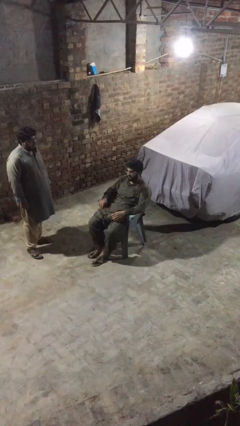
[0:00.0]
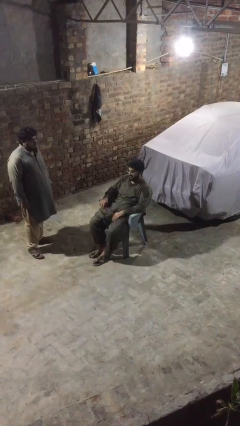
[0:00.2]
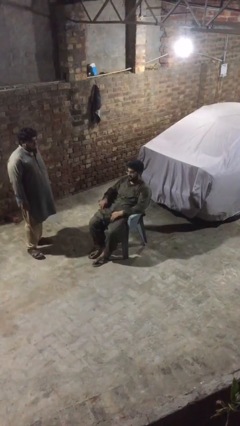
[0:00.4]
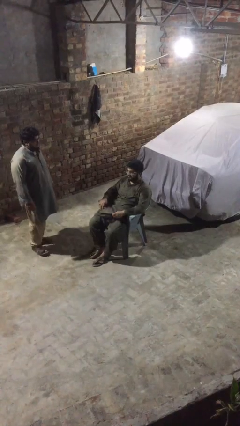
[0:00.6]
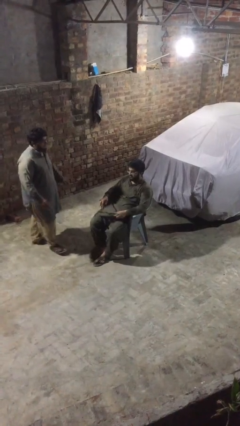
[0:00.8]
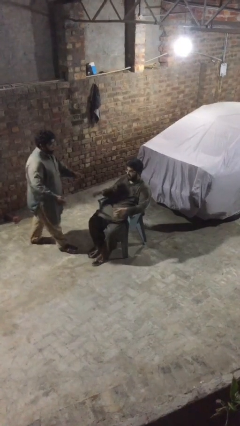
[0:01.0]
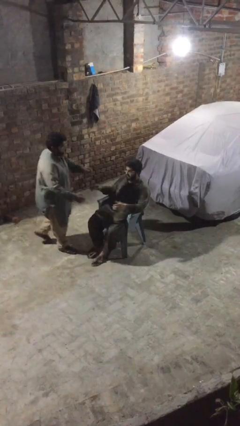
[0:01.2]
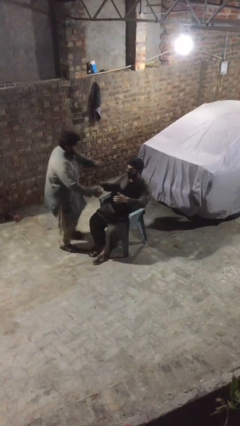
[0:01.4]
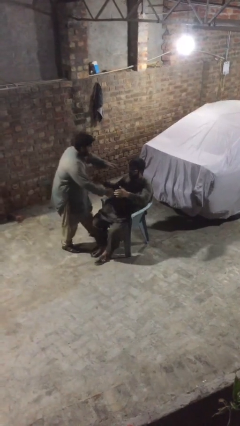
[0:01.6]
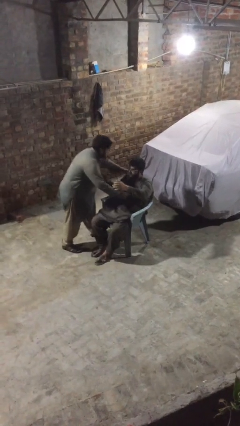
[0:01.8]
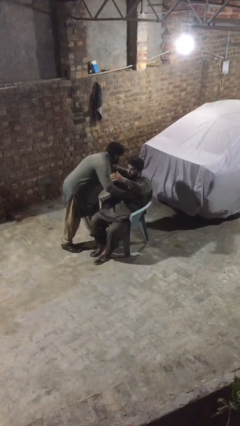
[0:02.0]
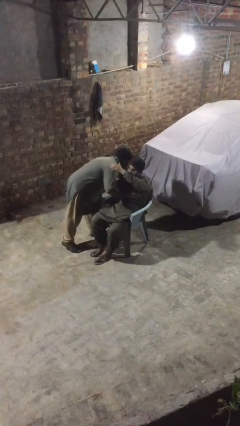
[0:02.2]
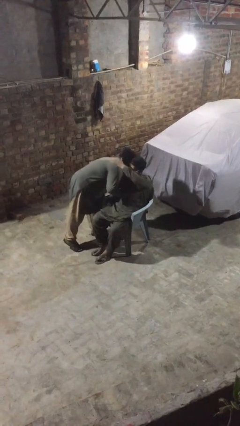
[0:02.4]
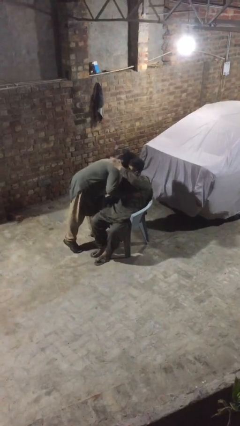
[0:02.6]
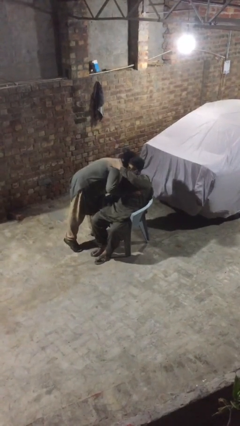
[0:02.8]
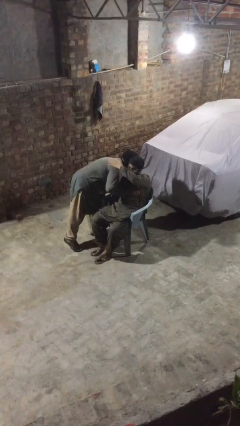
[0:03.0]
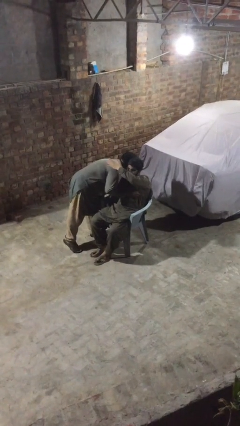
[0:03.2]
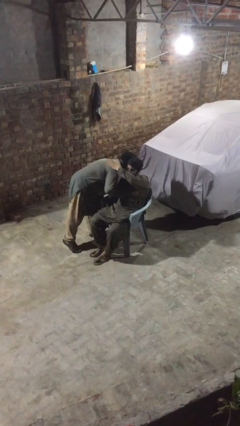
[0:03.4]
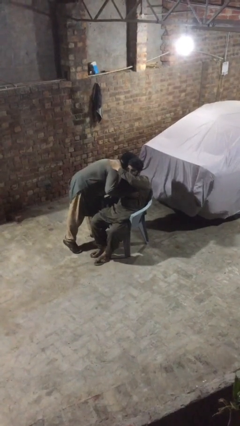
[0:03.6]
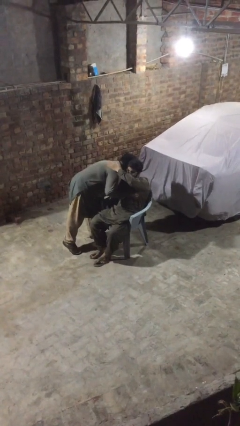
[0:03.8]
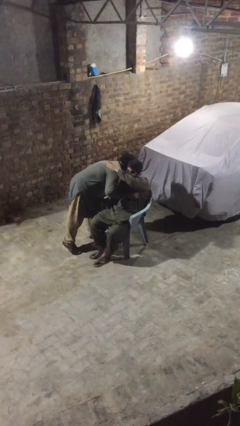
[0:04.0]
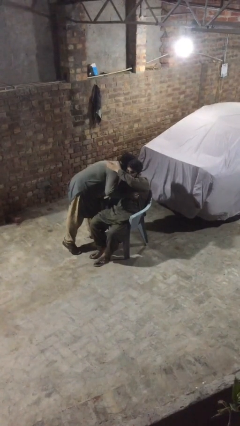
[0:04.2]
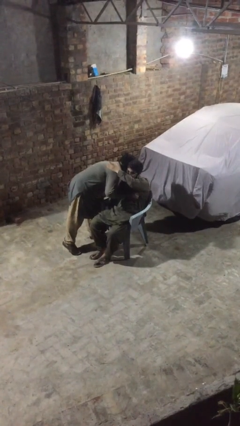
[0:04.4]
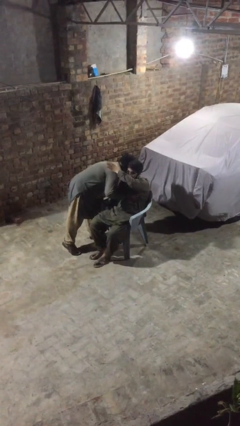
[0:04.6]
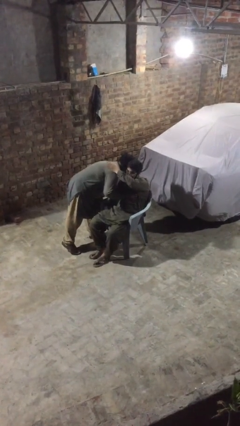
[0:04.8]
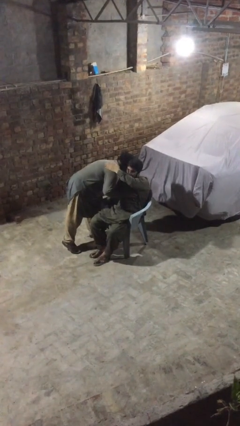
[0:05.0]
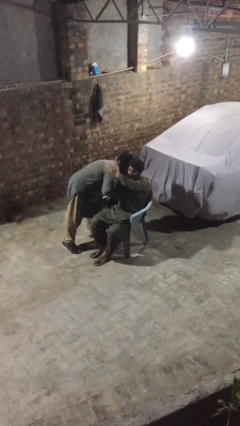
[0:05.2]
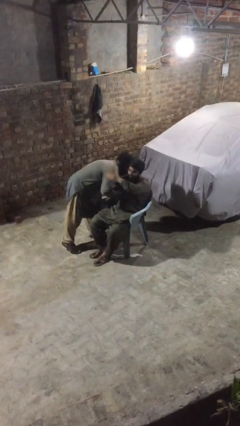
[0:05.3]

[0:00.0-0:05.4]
person embraces person

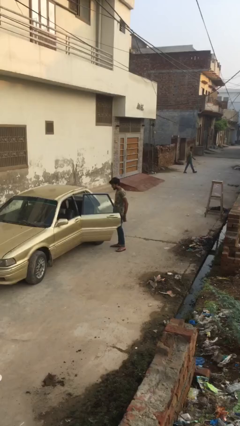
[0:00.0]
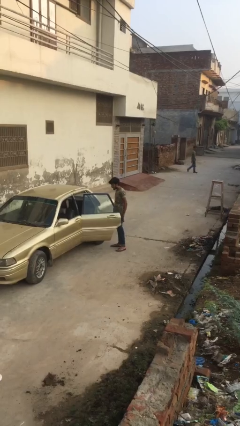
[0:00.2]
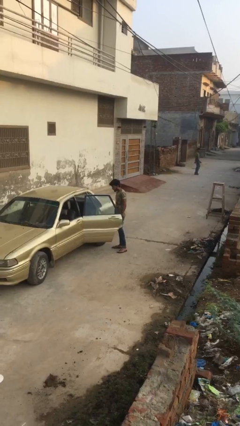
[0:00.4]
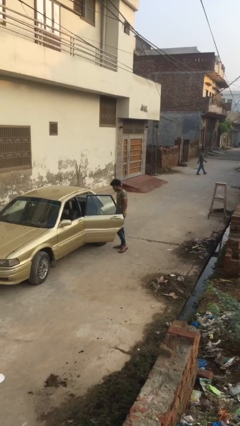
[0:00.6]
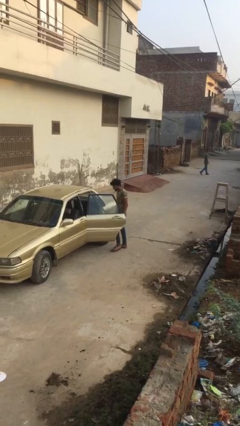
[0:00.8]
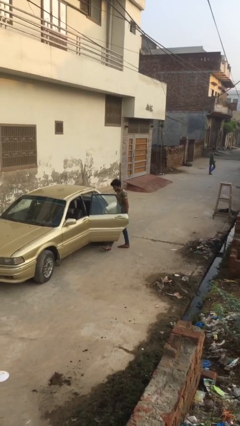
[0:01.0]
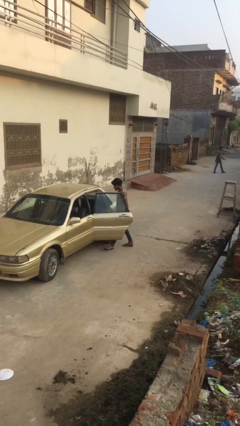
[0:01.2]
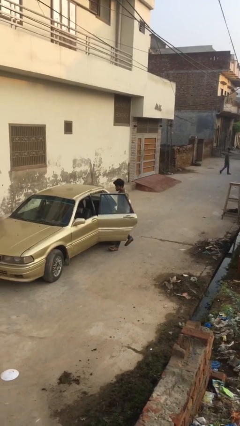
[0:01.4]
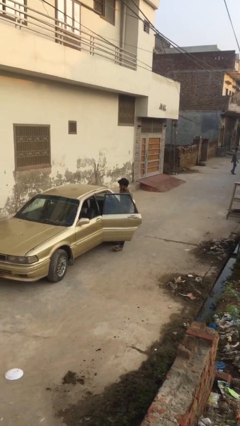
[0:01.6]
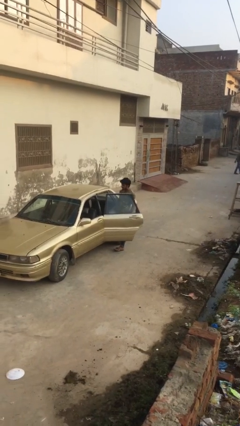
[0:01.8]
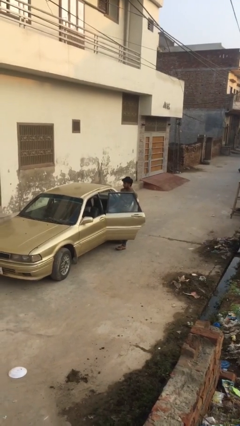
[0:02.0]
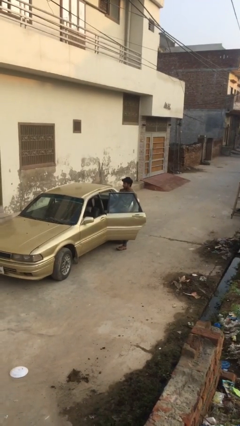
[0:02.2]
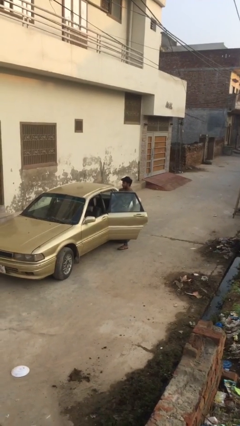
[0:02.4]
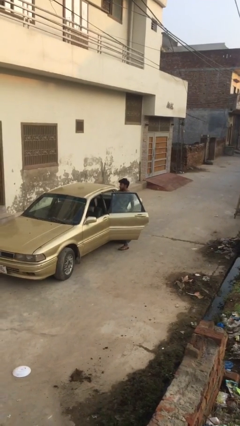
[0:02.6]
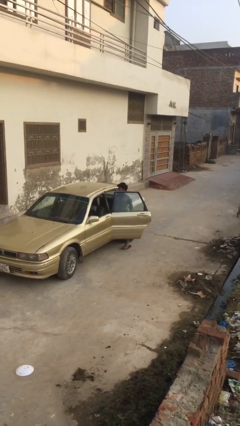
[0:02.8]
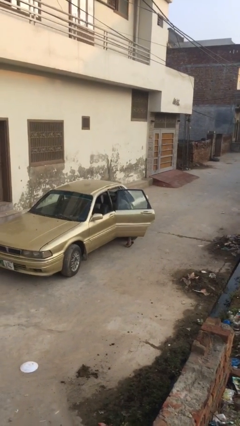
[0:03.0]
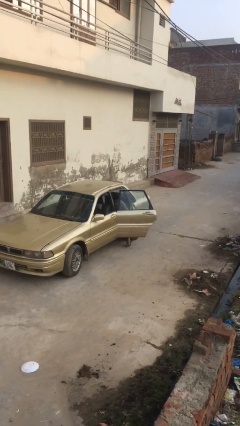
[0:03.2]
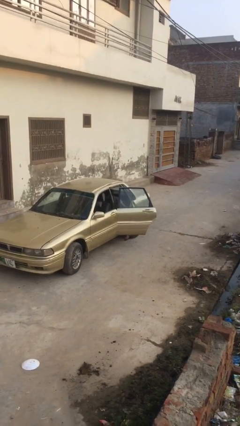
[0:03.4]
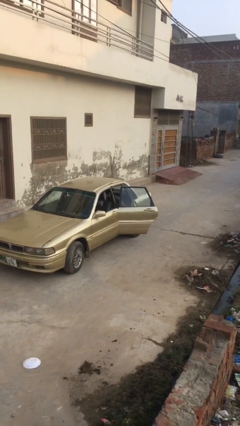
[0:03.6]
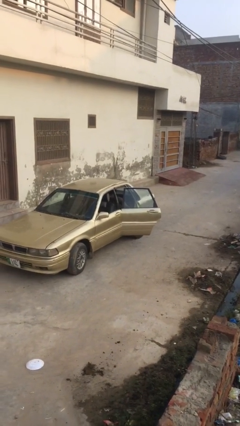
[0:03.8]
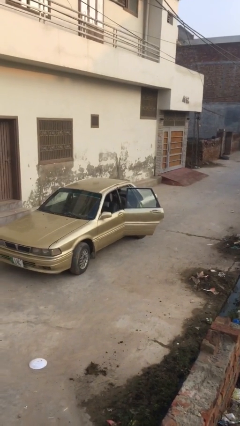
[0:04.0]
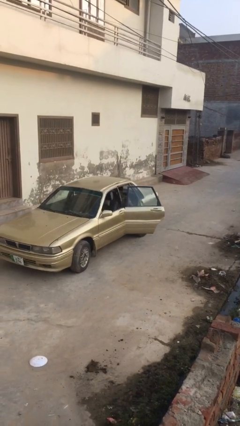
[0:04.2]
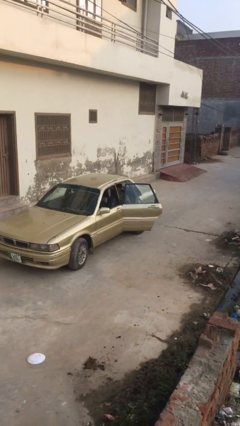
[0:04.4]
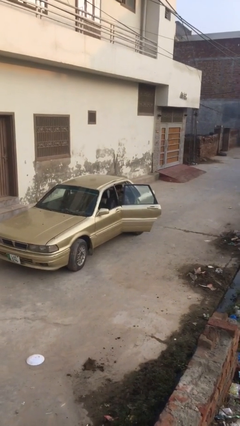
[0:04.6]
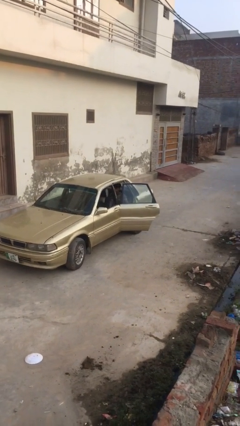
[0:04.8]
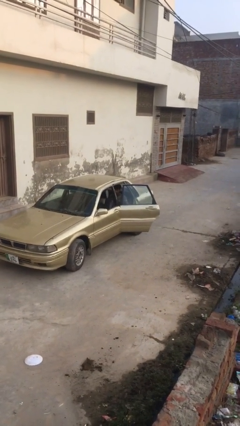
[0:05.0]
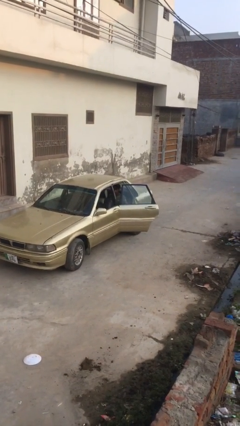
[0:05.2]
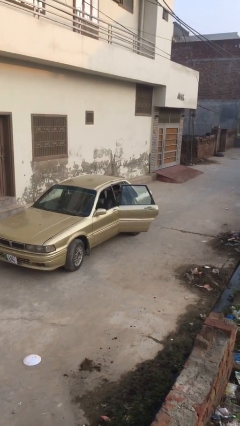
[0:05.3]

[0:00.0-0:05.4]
person enters car

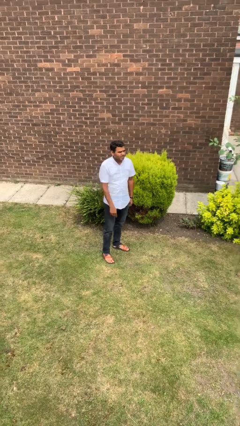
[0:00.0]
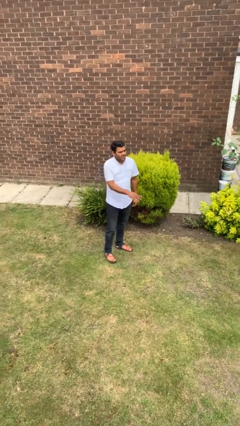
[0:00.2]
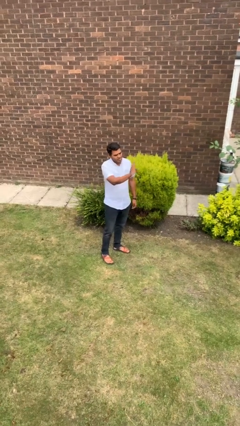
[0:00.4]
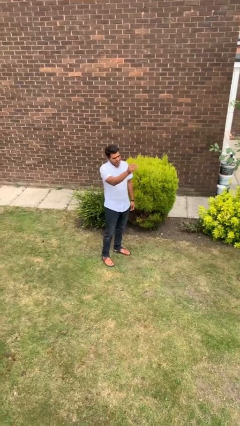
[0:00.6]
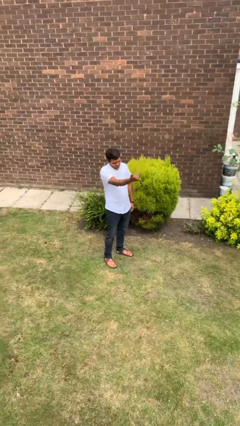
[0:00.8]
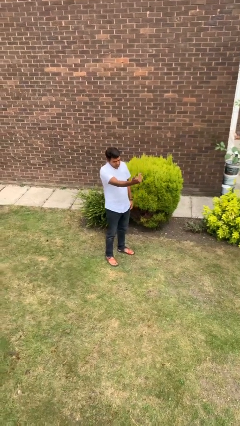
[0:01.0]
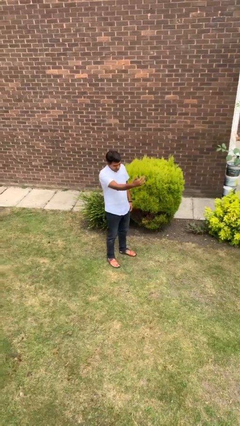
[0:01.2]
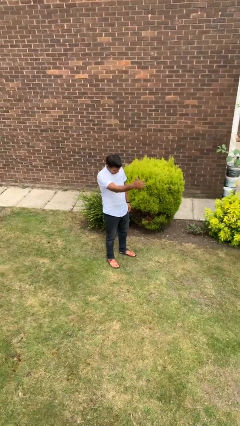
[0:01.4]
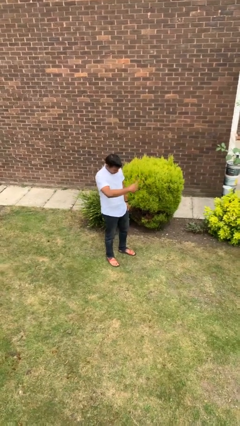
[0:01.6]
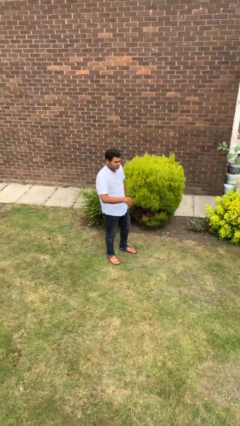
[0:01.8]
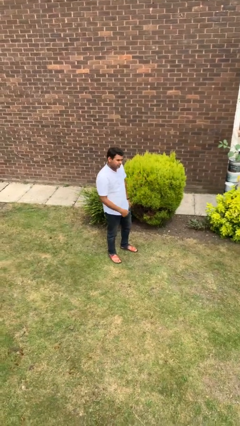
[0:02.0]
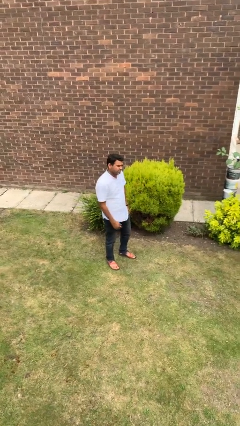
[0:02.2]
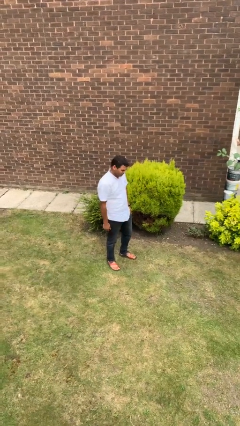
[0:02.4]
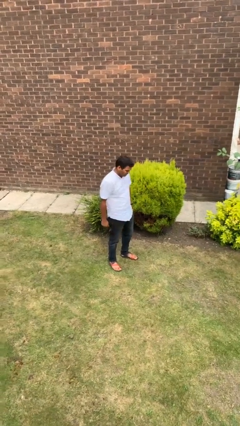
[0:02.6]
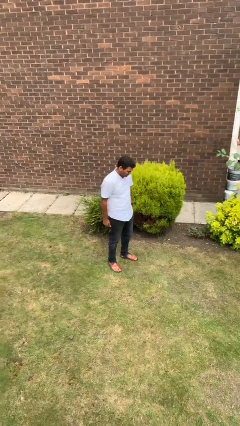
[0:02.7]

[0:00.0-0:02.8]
person gestures come here

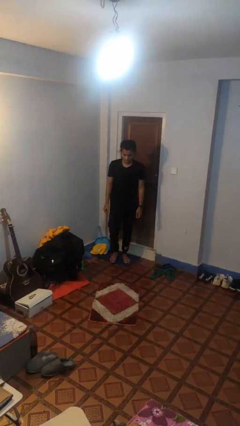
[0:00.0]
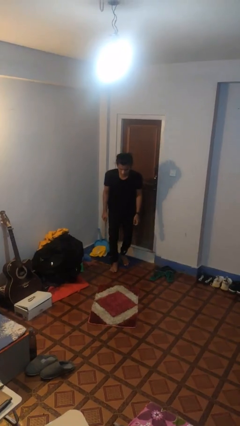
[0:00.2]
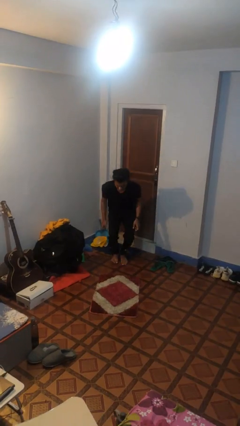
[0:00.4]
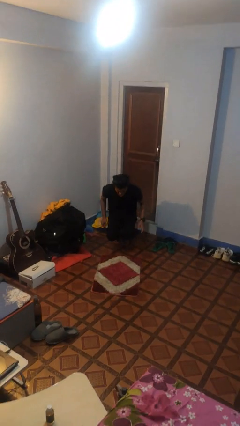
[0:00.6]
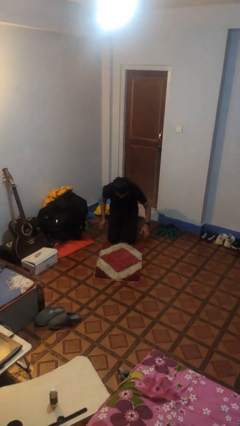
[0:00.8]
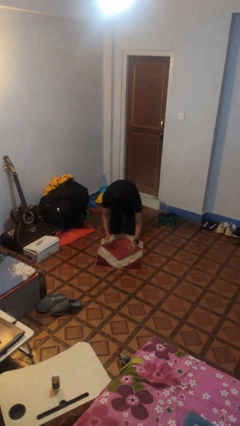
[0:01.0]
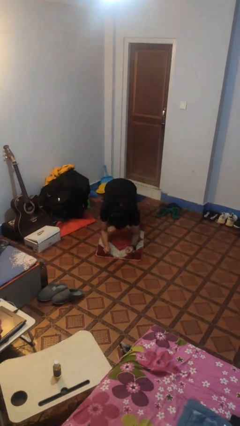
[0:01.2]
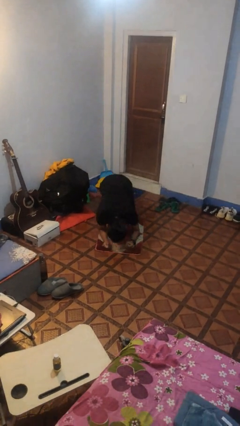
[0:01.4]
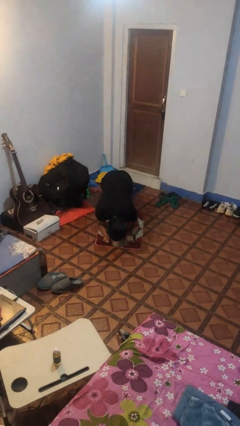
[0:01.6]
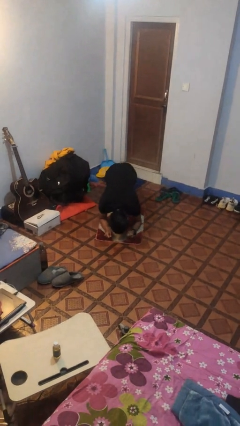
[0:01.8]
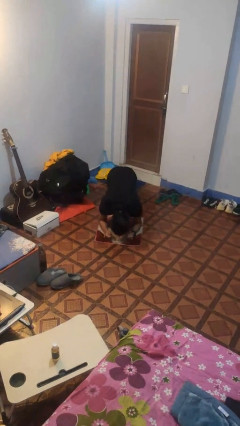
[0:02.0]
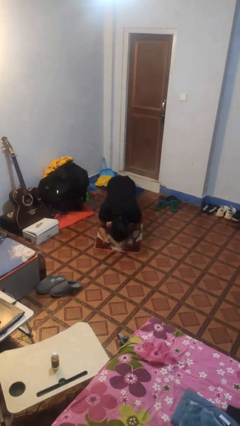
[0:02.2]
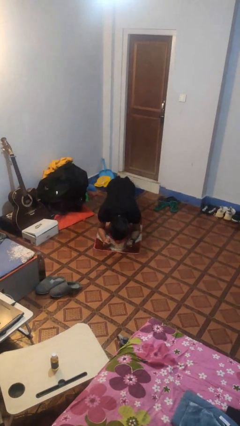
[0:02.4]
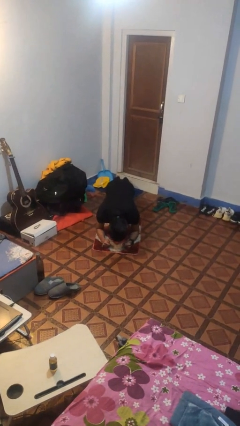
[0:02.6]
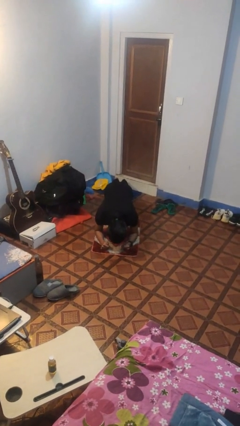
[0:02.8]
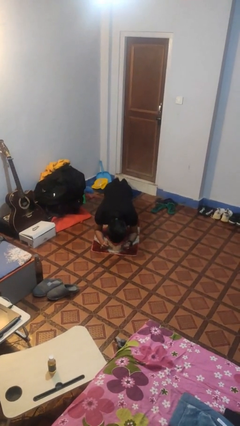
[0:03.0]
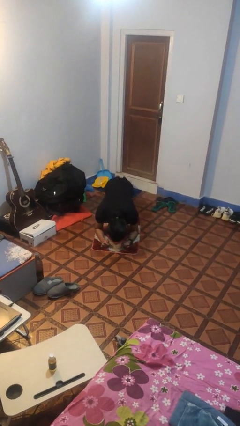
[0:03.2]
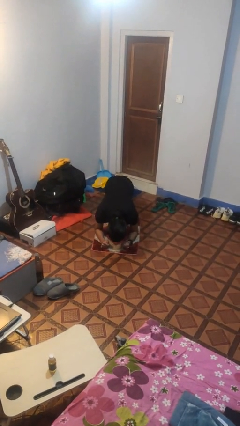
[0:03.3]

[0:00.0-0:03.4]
person exercises with plank

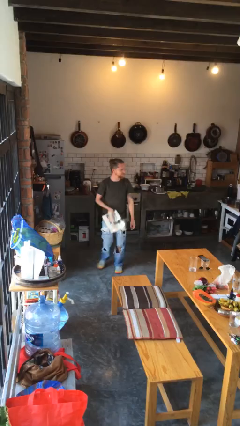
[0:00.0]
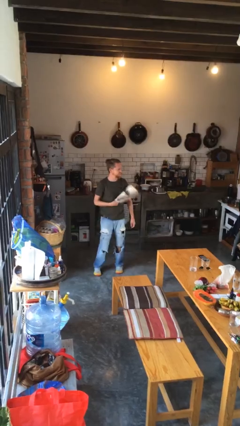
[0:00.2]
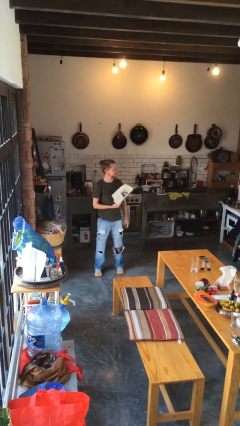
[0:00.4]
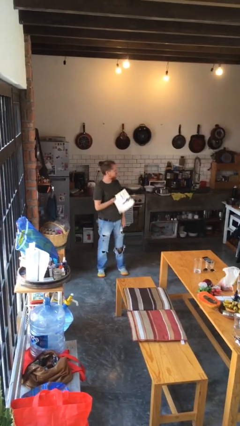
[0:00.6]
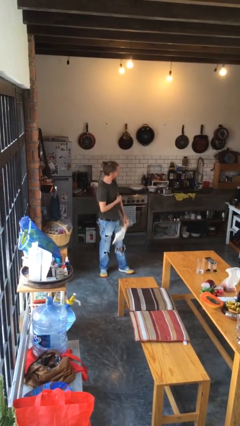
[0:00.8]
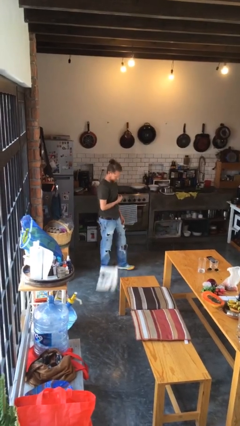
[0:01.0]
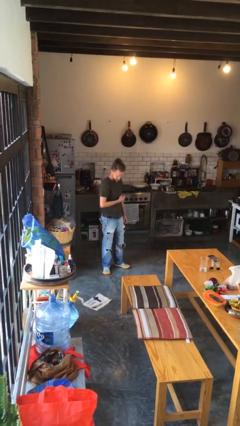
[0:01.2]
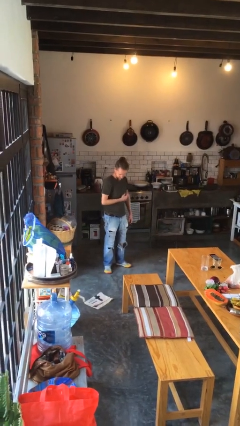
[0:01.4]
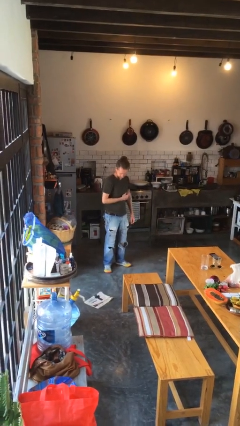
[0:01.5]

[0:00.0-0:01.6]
person drops object
